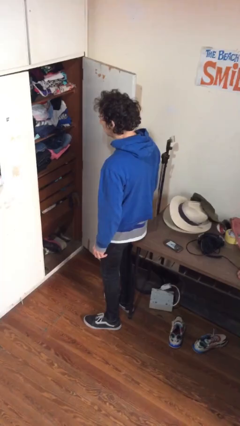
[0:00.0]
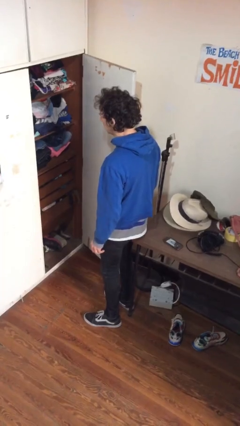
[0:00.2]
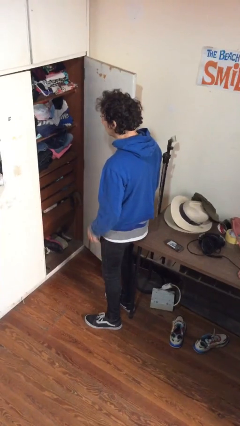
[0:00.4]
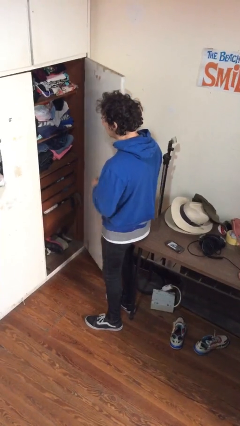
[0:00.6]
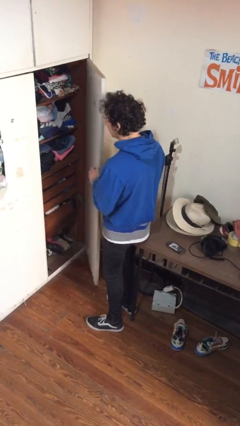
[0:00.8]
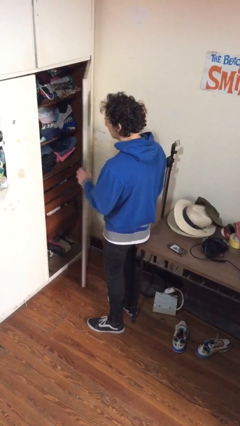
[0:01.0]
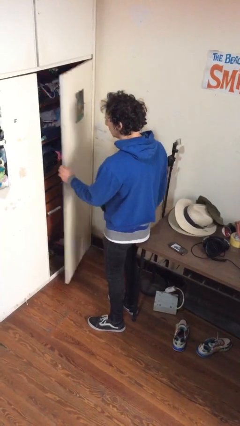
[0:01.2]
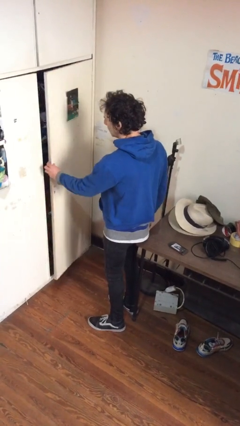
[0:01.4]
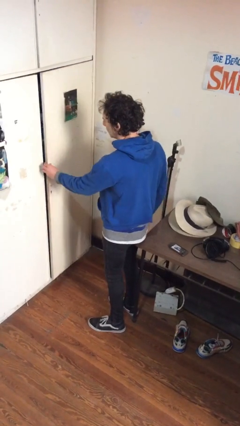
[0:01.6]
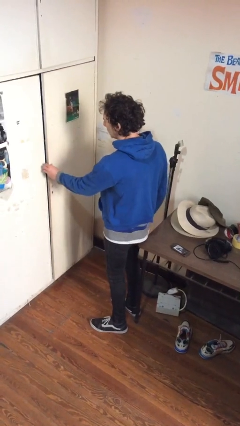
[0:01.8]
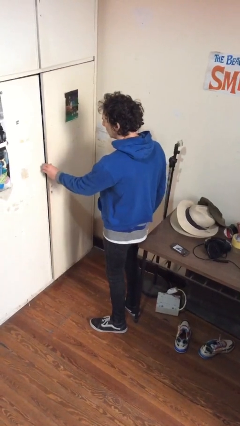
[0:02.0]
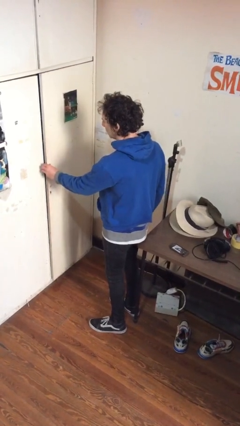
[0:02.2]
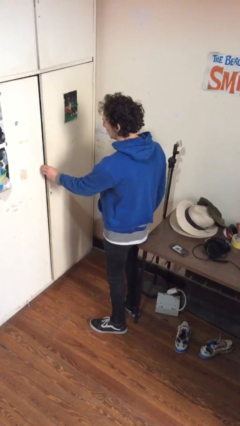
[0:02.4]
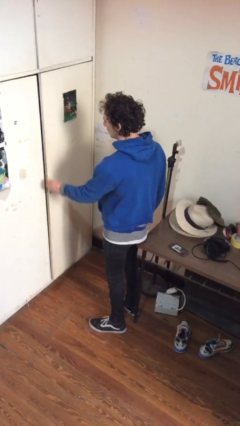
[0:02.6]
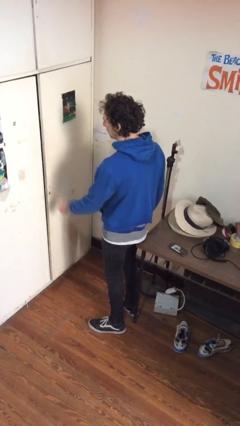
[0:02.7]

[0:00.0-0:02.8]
person closes closet door

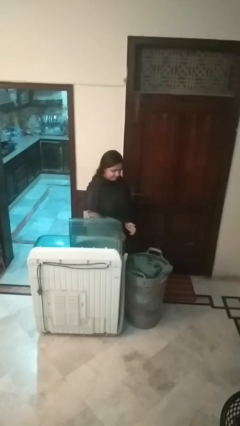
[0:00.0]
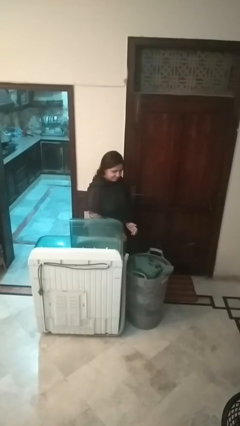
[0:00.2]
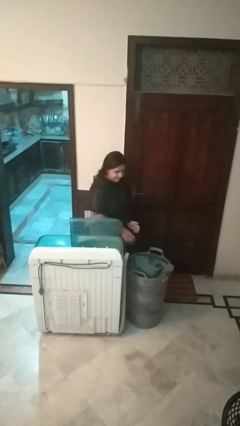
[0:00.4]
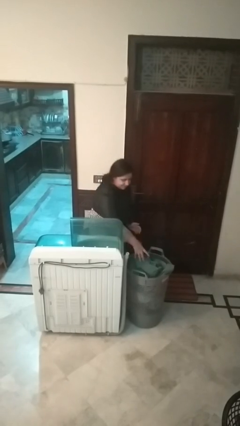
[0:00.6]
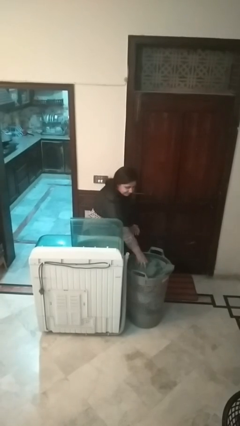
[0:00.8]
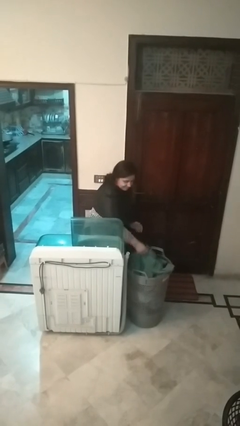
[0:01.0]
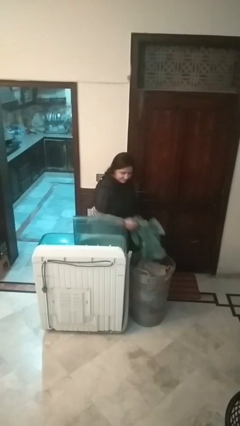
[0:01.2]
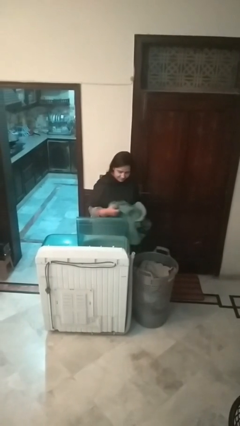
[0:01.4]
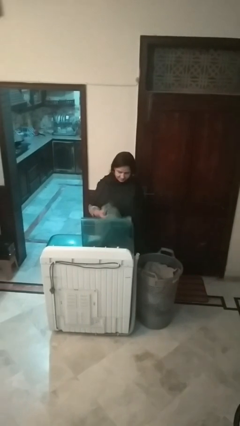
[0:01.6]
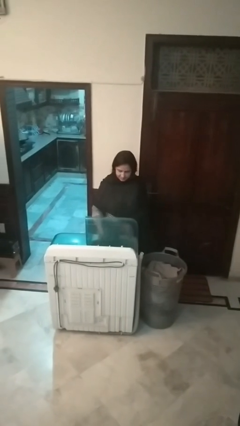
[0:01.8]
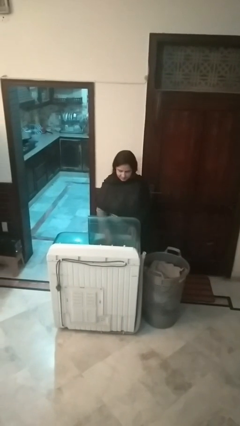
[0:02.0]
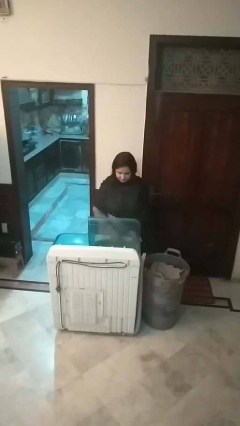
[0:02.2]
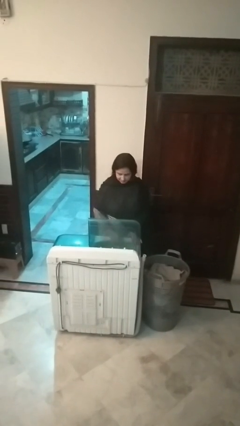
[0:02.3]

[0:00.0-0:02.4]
person loads clotheswasher

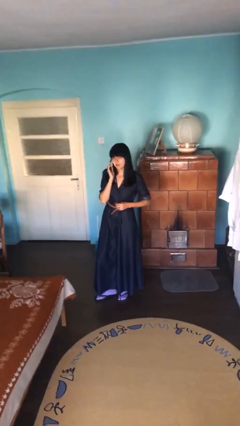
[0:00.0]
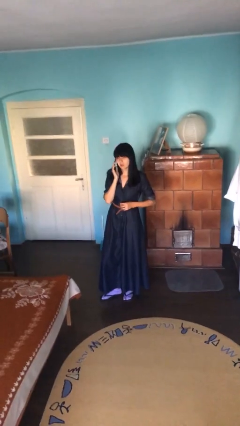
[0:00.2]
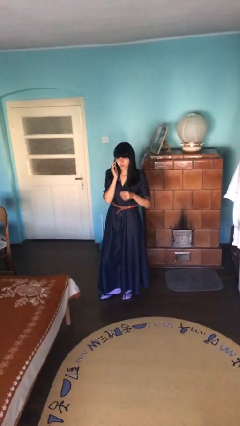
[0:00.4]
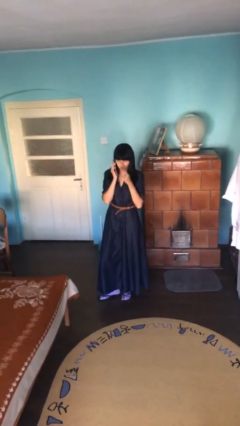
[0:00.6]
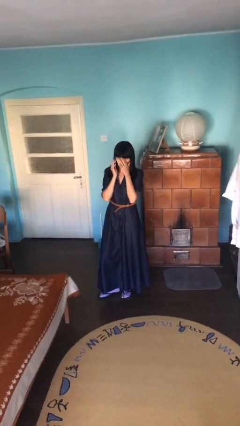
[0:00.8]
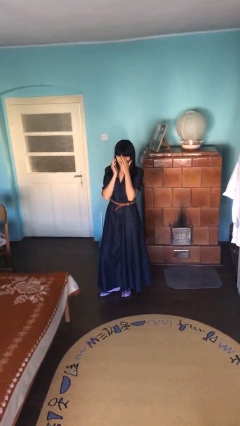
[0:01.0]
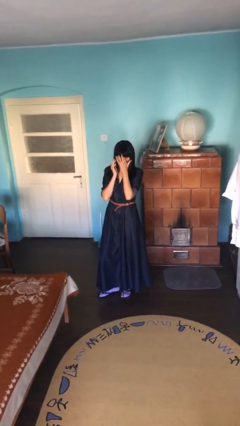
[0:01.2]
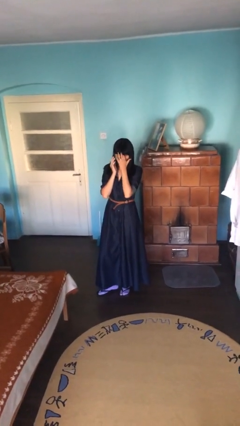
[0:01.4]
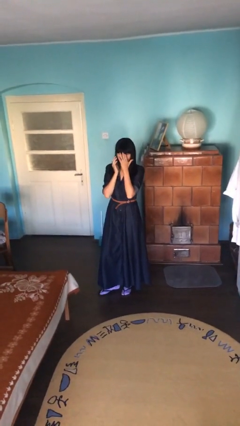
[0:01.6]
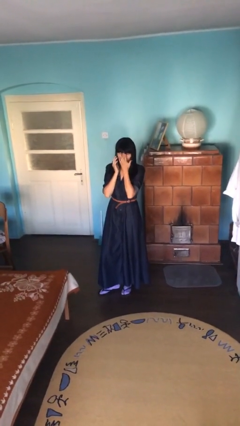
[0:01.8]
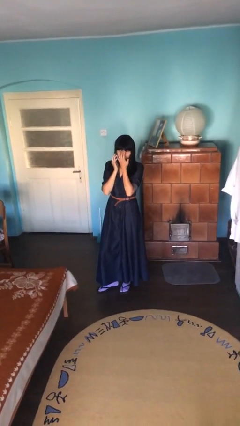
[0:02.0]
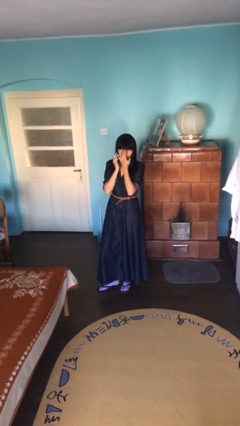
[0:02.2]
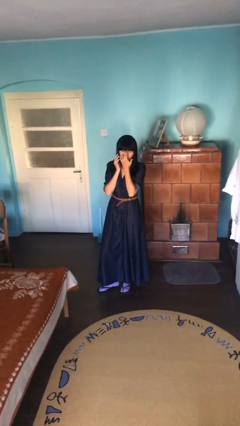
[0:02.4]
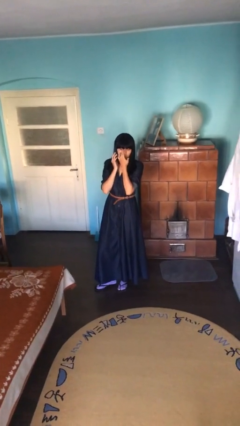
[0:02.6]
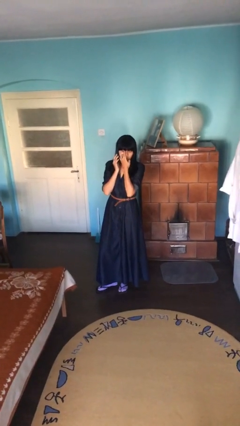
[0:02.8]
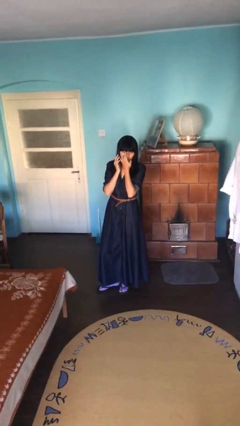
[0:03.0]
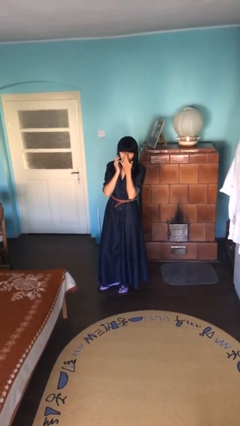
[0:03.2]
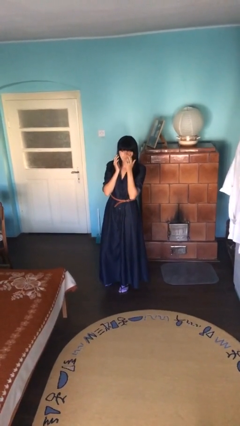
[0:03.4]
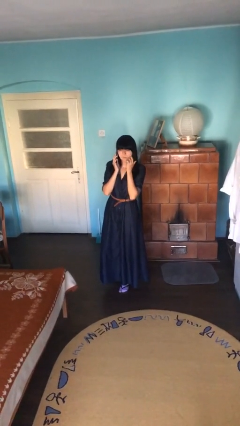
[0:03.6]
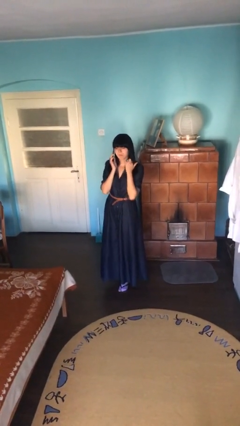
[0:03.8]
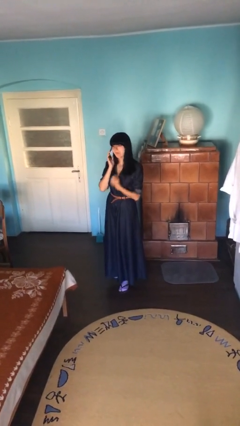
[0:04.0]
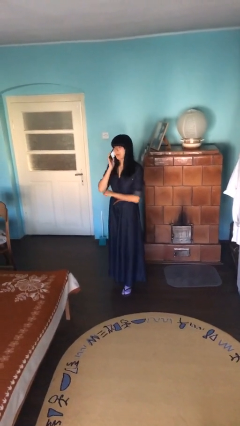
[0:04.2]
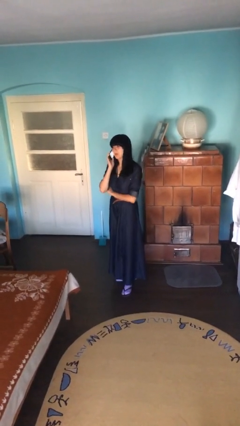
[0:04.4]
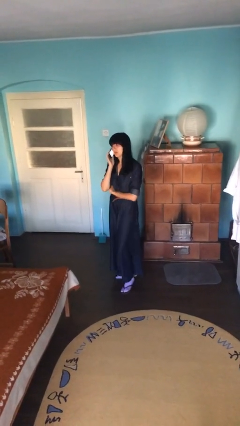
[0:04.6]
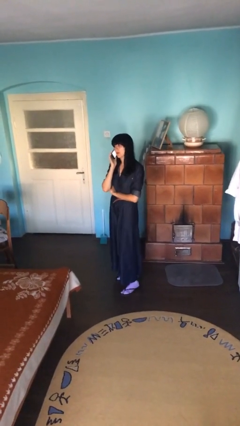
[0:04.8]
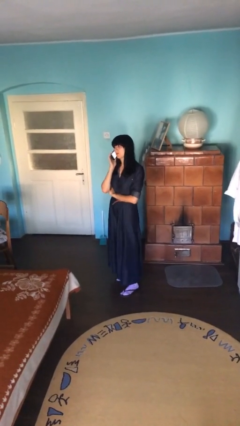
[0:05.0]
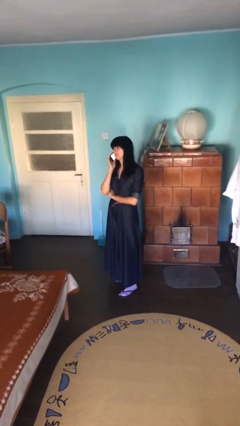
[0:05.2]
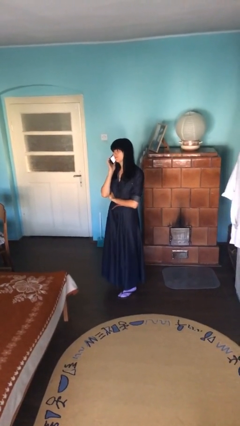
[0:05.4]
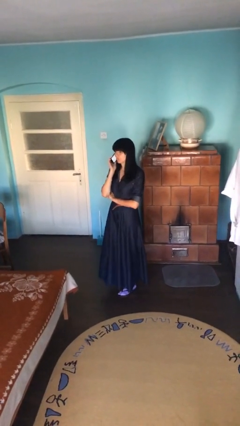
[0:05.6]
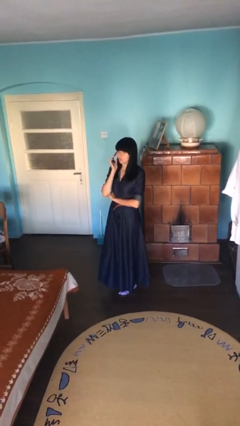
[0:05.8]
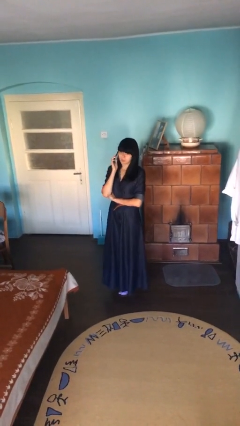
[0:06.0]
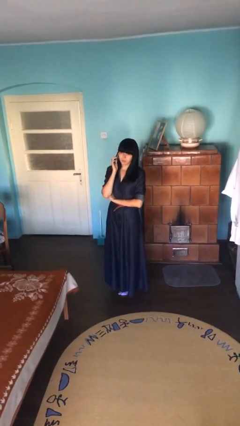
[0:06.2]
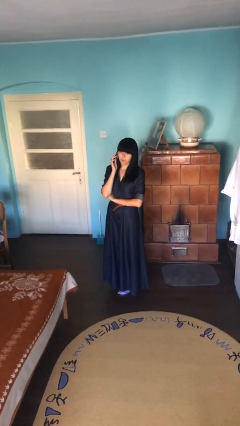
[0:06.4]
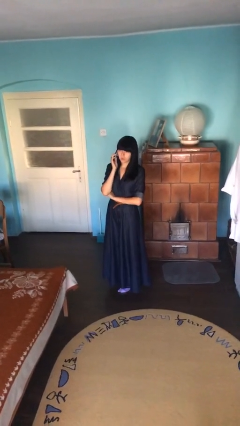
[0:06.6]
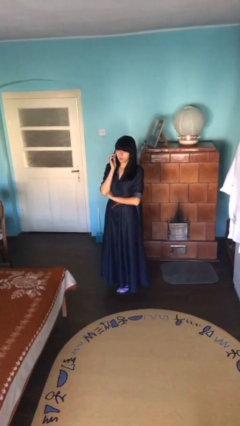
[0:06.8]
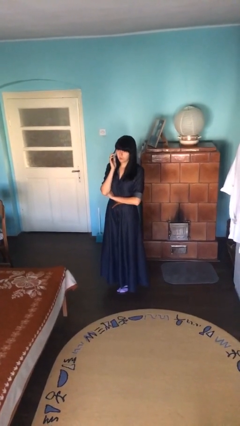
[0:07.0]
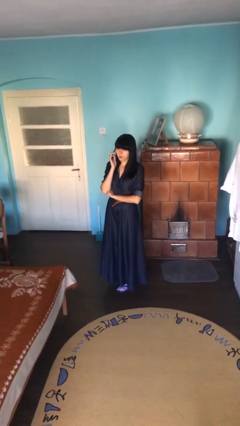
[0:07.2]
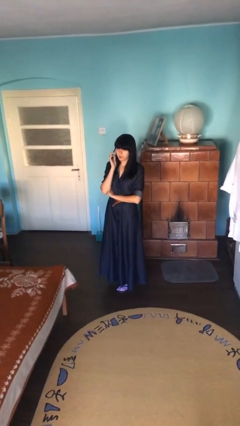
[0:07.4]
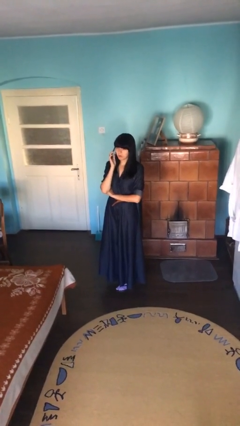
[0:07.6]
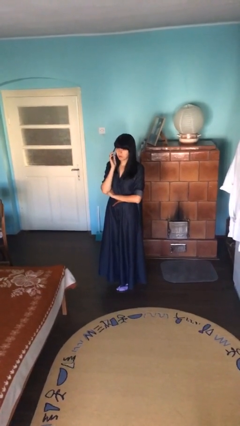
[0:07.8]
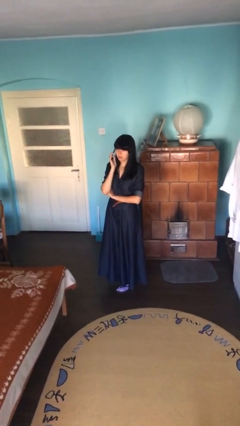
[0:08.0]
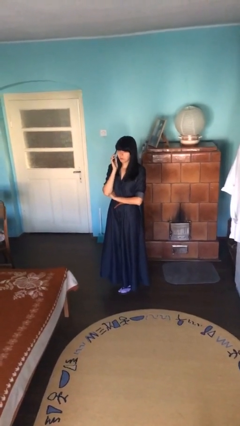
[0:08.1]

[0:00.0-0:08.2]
person talks on phone

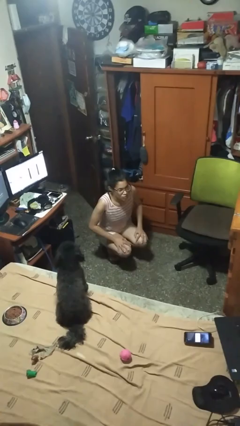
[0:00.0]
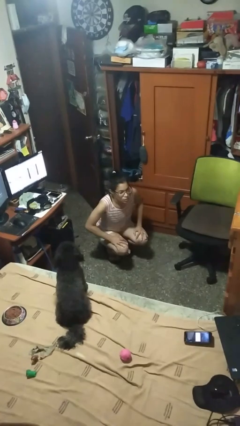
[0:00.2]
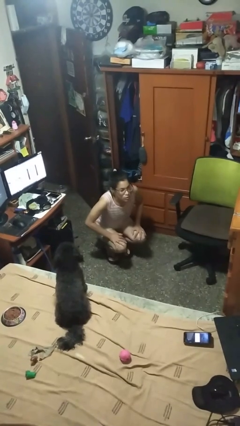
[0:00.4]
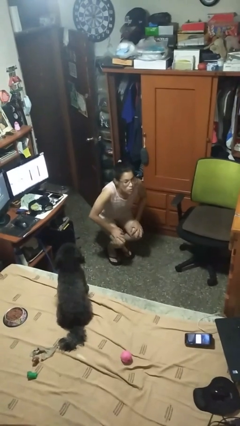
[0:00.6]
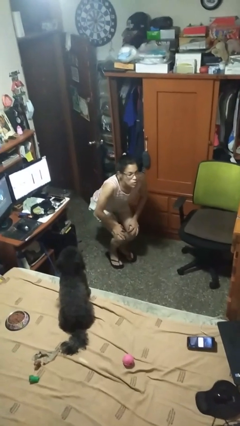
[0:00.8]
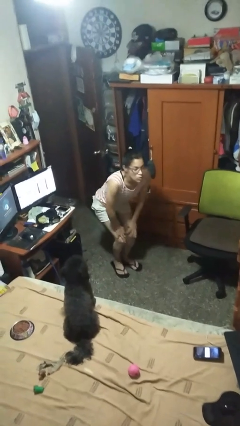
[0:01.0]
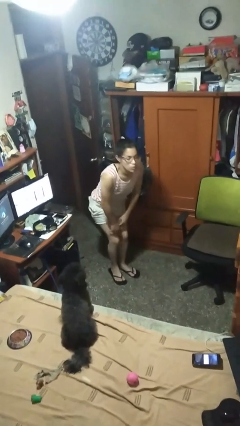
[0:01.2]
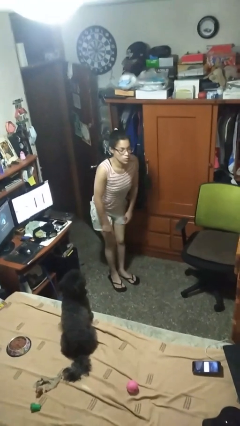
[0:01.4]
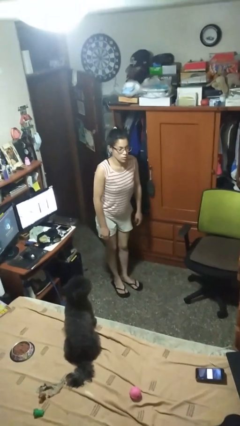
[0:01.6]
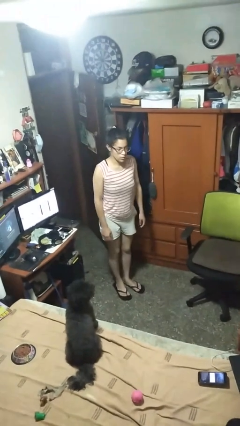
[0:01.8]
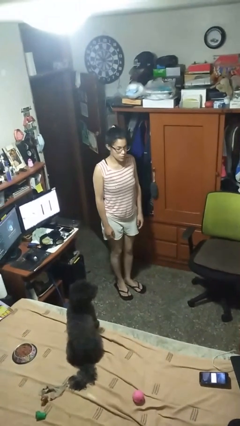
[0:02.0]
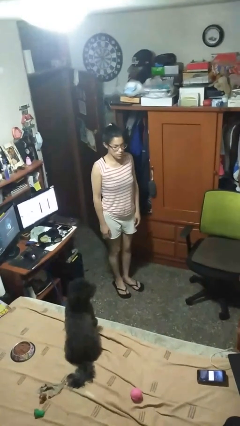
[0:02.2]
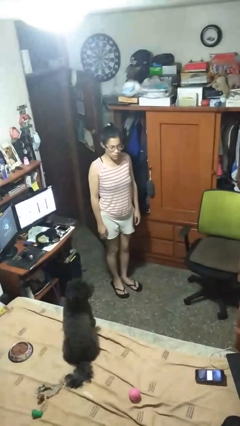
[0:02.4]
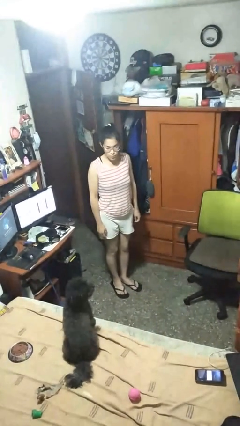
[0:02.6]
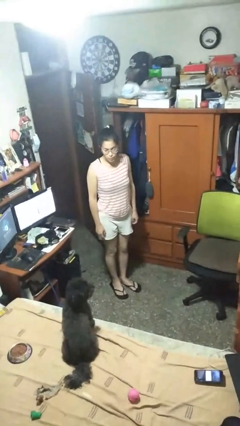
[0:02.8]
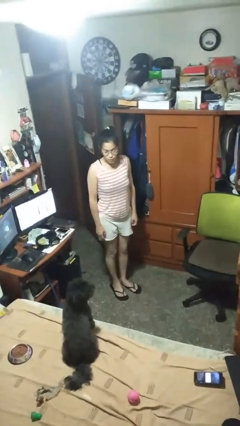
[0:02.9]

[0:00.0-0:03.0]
person stands up

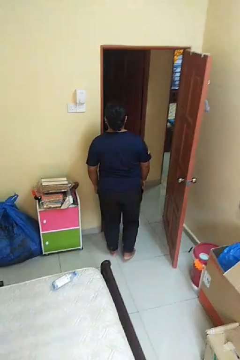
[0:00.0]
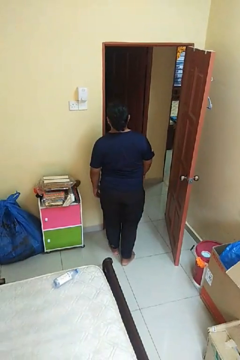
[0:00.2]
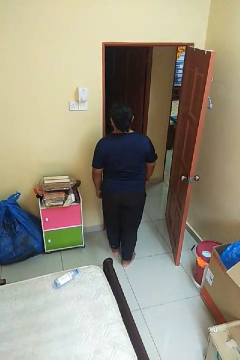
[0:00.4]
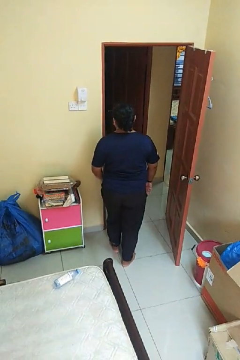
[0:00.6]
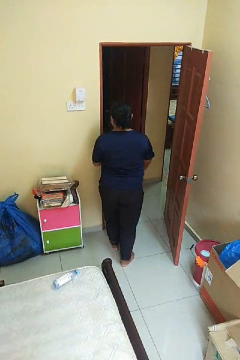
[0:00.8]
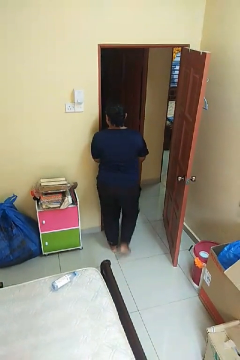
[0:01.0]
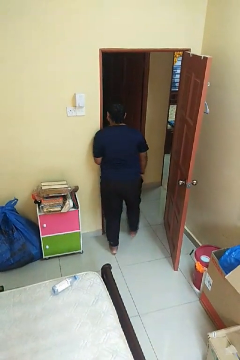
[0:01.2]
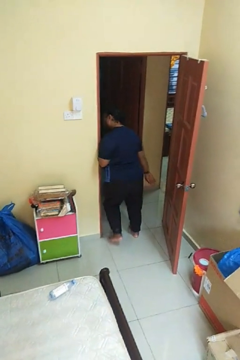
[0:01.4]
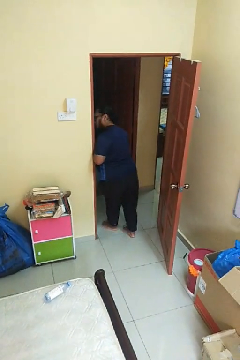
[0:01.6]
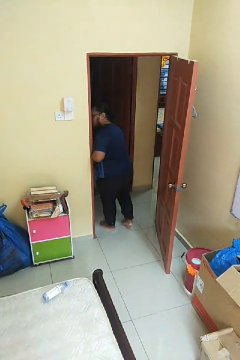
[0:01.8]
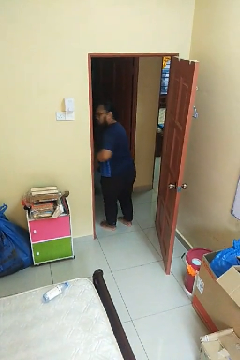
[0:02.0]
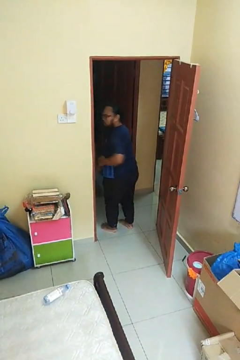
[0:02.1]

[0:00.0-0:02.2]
person bumps into wall
